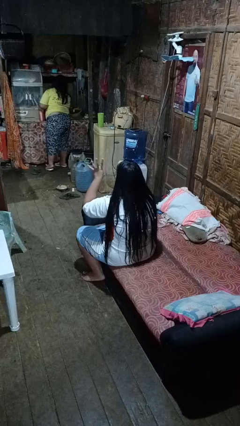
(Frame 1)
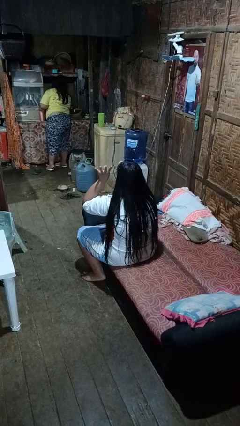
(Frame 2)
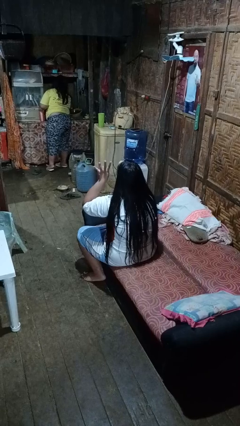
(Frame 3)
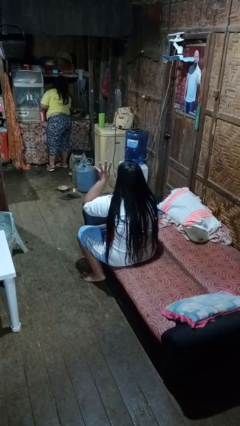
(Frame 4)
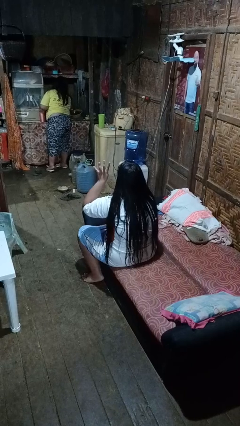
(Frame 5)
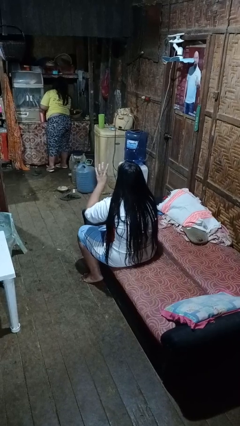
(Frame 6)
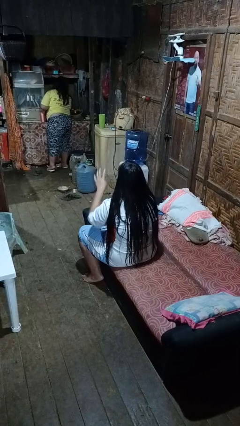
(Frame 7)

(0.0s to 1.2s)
person gestures number four

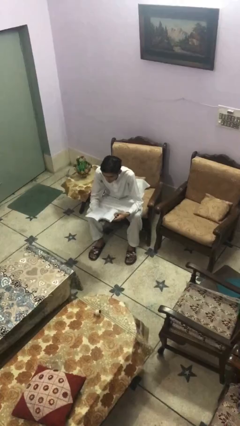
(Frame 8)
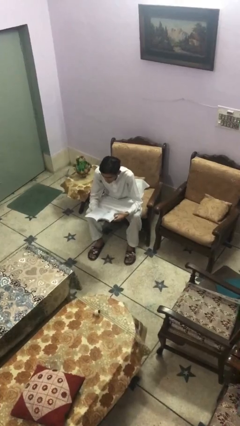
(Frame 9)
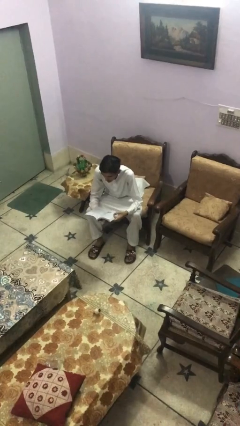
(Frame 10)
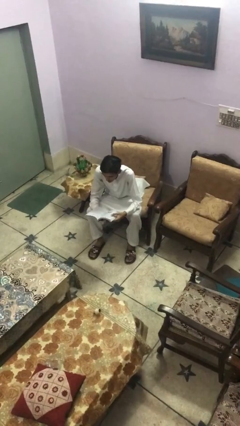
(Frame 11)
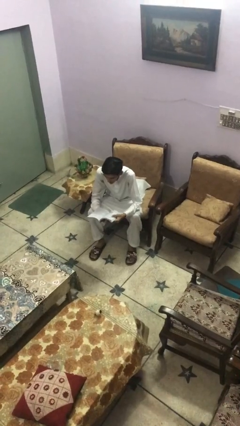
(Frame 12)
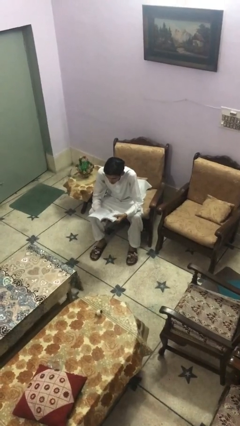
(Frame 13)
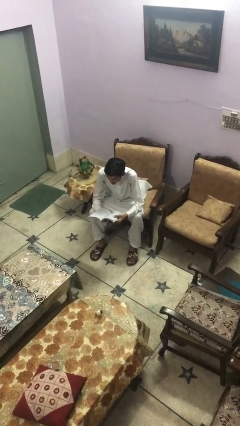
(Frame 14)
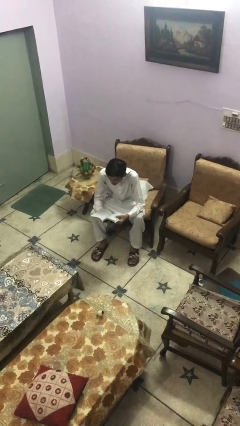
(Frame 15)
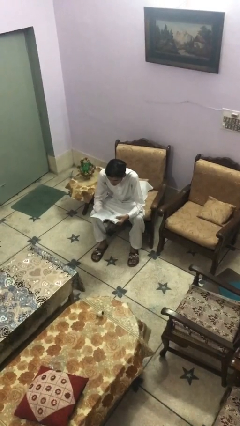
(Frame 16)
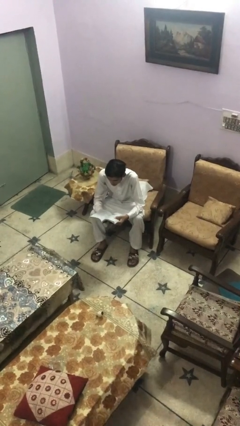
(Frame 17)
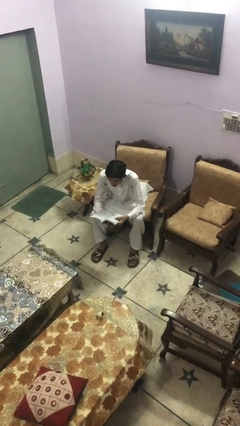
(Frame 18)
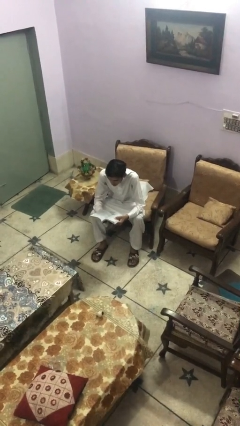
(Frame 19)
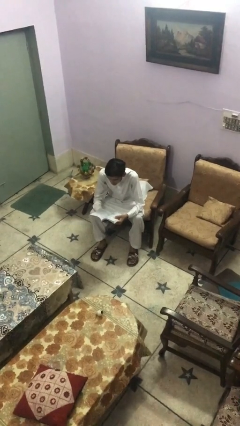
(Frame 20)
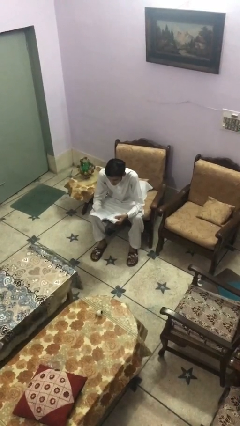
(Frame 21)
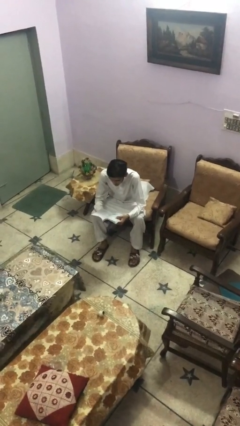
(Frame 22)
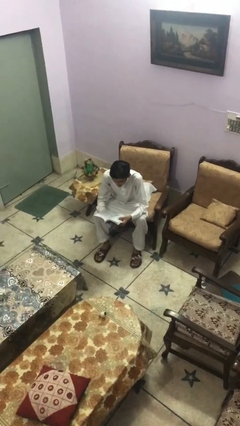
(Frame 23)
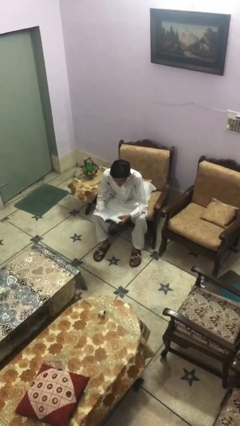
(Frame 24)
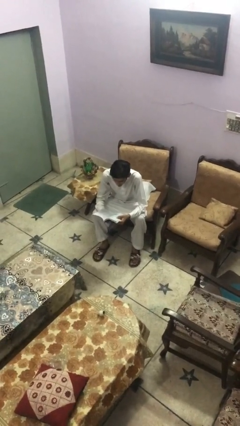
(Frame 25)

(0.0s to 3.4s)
person reads document

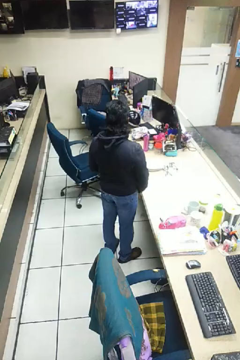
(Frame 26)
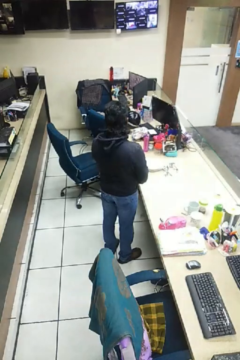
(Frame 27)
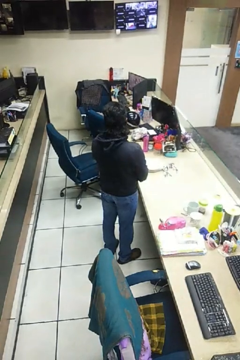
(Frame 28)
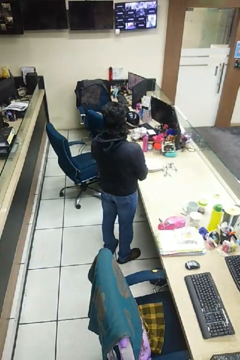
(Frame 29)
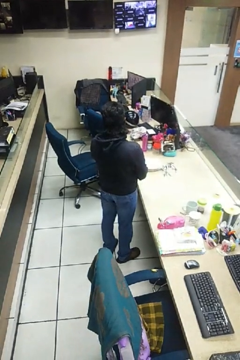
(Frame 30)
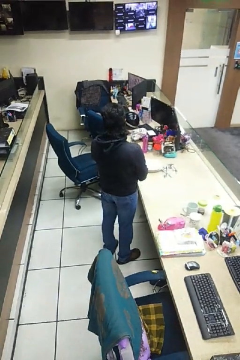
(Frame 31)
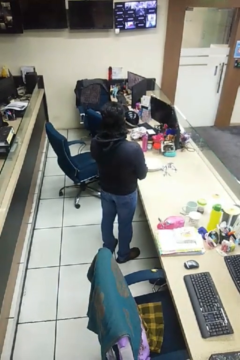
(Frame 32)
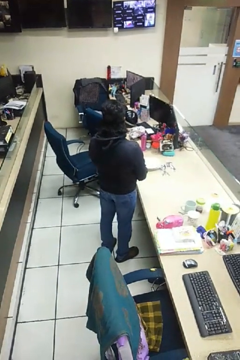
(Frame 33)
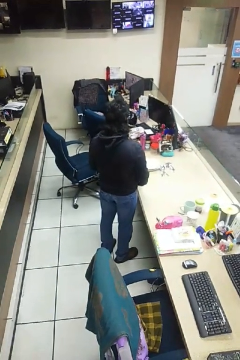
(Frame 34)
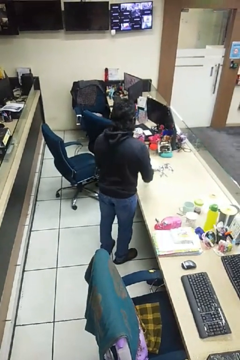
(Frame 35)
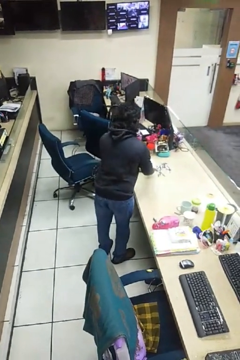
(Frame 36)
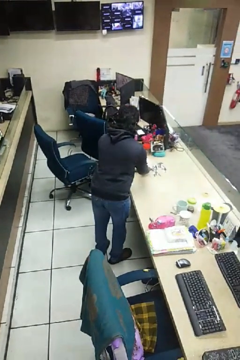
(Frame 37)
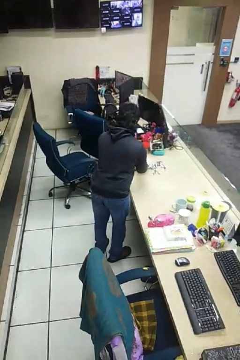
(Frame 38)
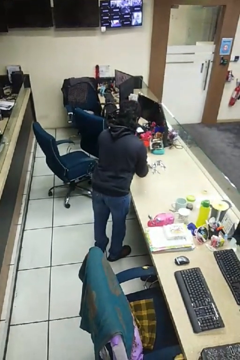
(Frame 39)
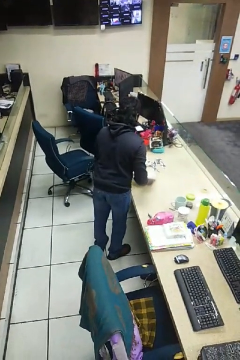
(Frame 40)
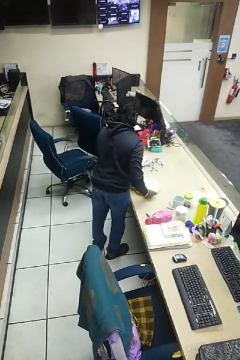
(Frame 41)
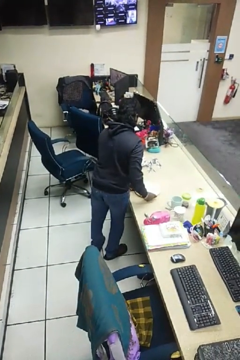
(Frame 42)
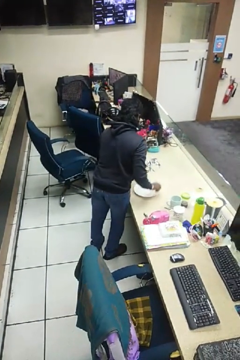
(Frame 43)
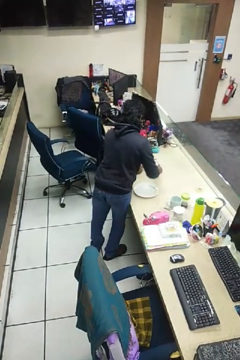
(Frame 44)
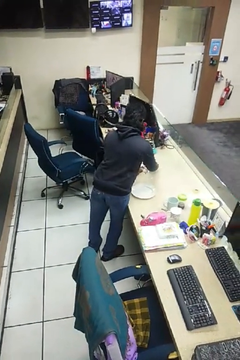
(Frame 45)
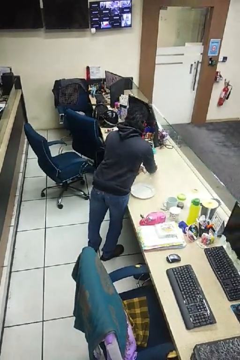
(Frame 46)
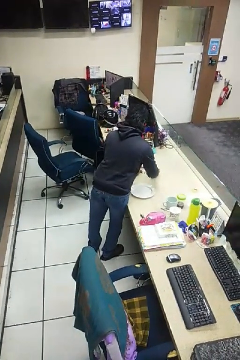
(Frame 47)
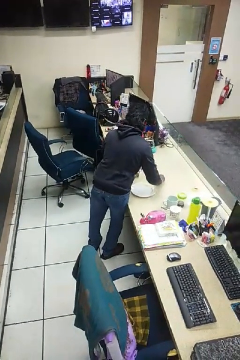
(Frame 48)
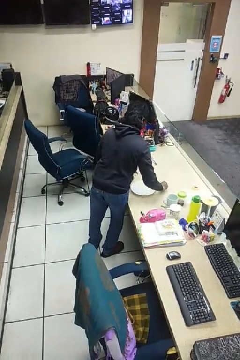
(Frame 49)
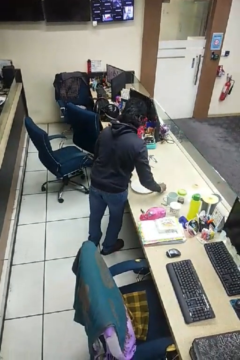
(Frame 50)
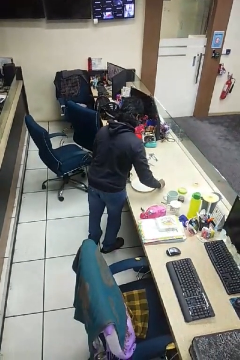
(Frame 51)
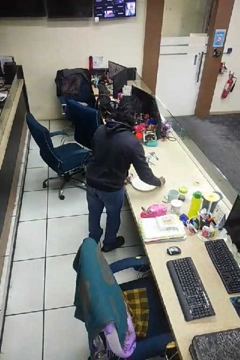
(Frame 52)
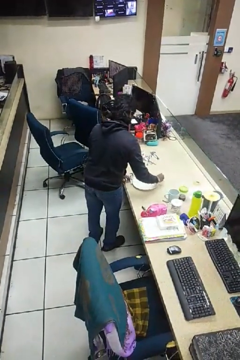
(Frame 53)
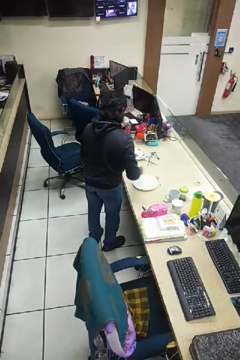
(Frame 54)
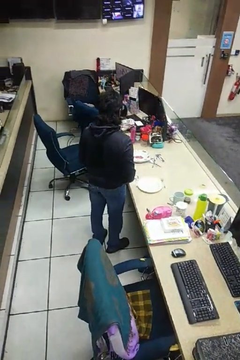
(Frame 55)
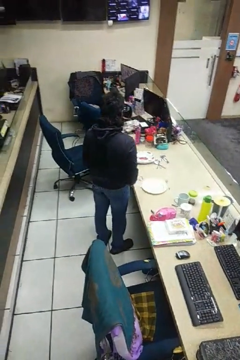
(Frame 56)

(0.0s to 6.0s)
person sets table

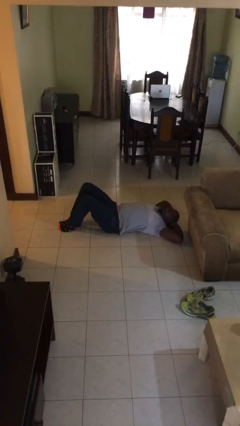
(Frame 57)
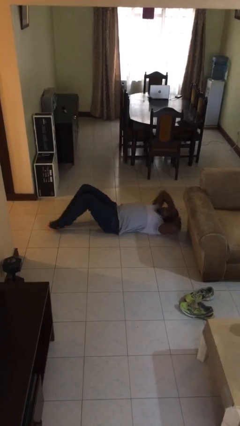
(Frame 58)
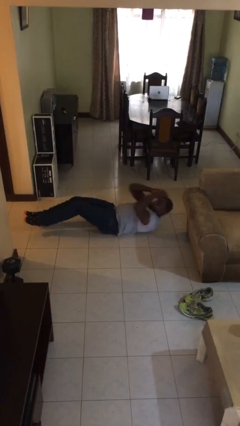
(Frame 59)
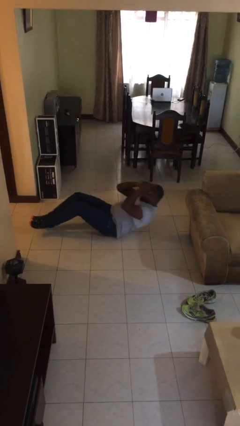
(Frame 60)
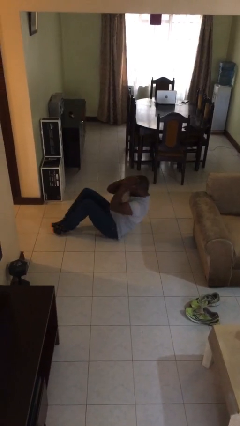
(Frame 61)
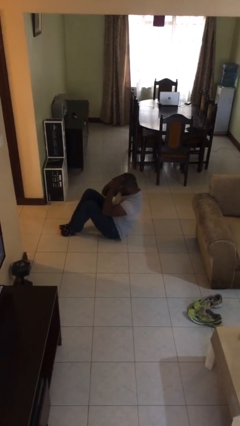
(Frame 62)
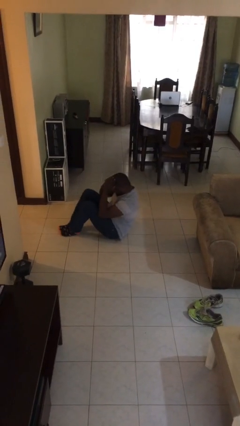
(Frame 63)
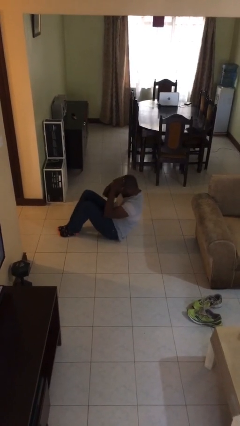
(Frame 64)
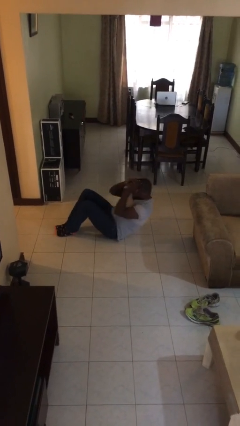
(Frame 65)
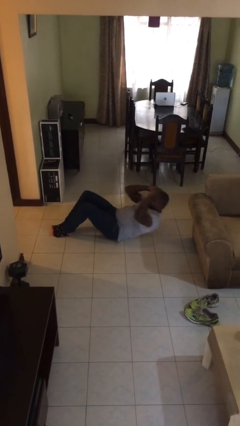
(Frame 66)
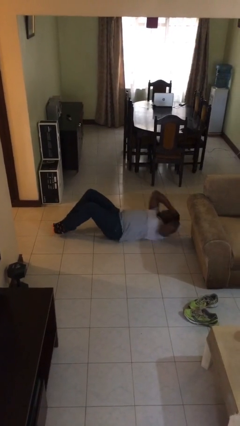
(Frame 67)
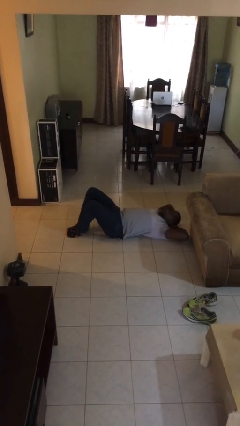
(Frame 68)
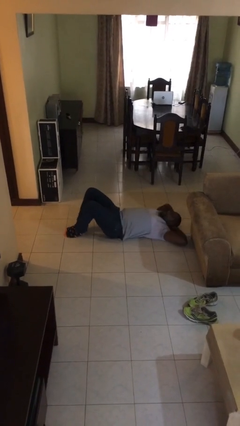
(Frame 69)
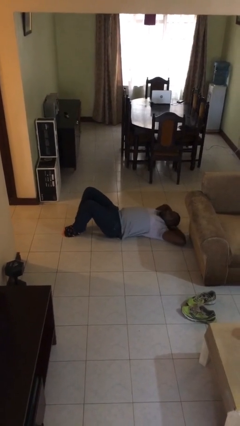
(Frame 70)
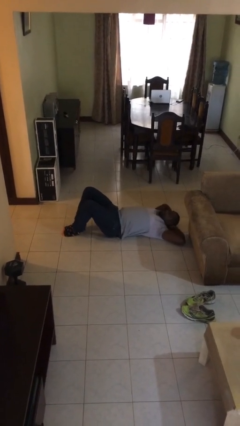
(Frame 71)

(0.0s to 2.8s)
person exercises with situp

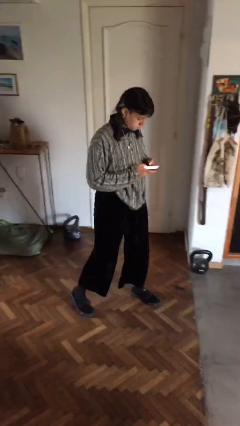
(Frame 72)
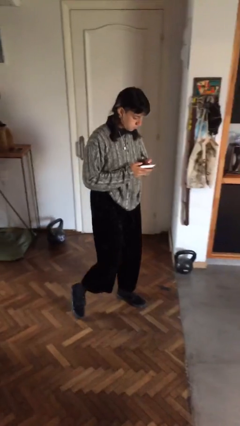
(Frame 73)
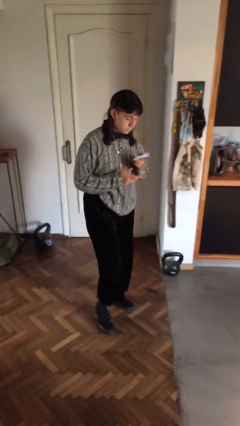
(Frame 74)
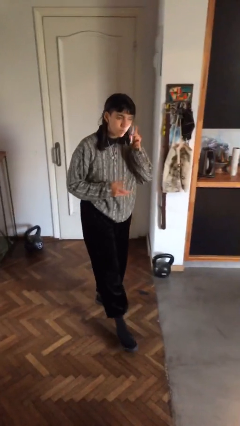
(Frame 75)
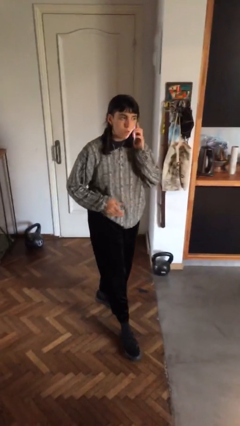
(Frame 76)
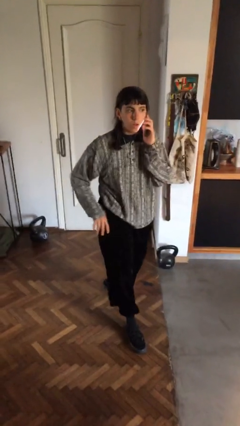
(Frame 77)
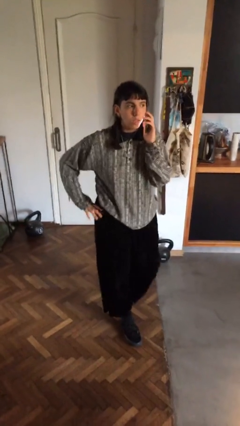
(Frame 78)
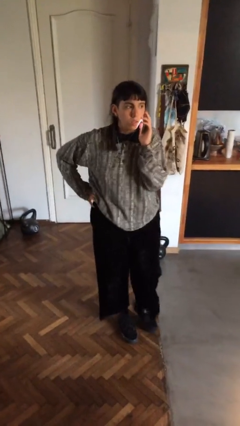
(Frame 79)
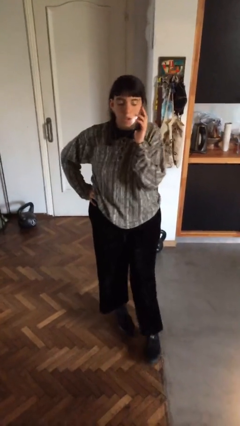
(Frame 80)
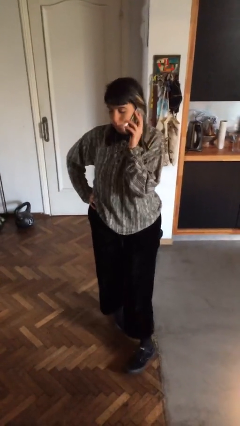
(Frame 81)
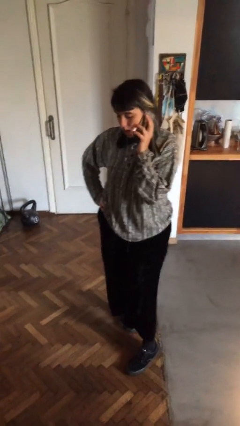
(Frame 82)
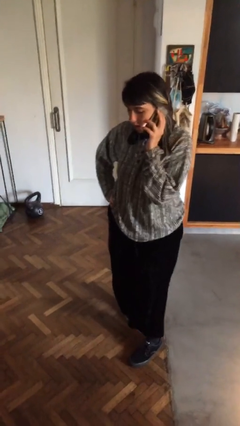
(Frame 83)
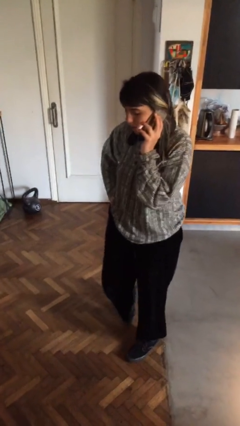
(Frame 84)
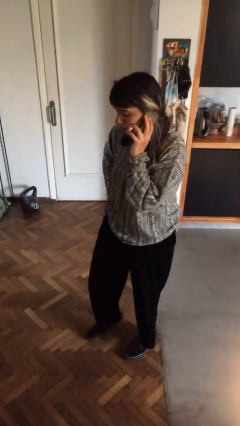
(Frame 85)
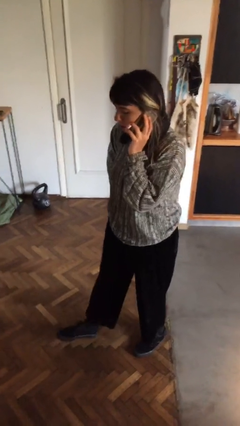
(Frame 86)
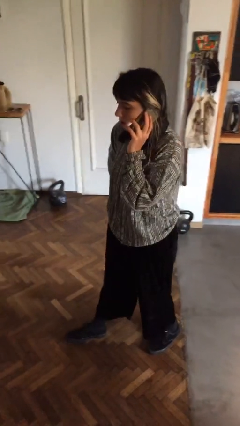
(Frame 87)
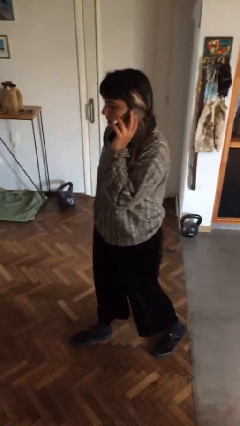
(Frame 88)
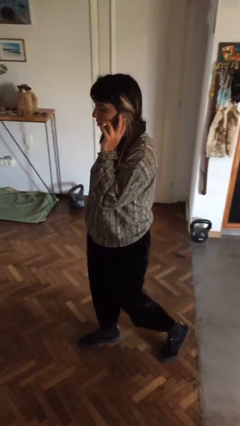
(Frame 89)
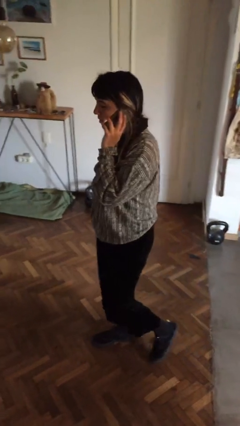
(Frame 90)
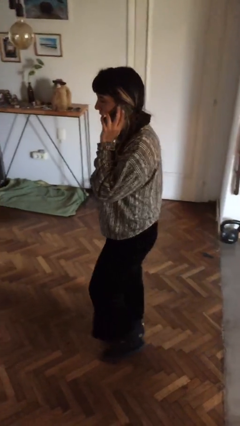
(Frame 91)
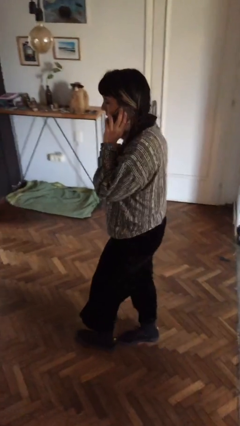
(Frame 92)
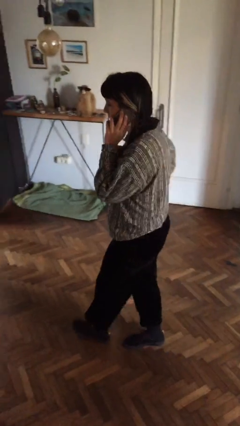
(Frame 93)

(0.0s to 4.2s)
person talks on phone

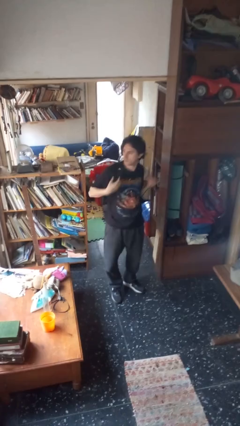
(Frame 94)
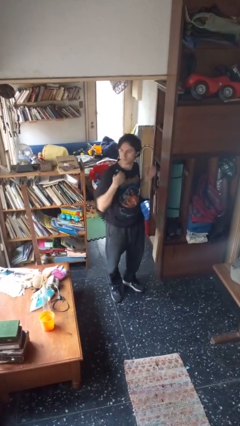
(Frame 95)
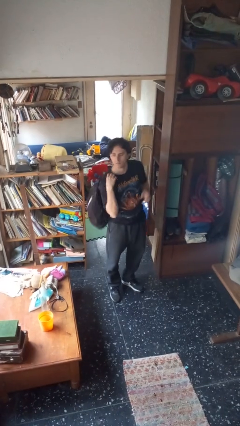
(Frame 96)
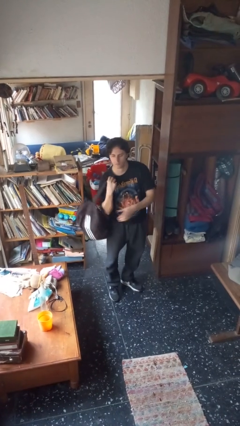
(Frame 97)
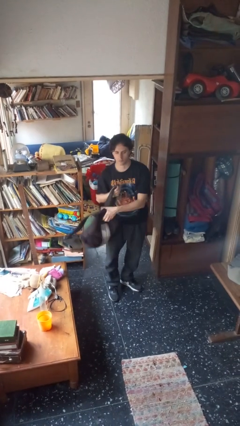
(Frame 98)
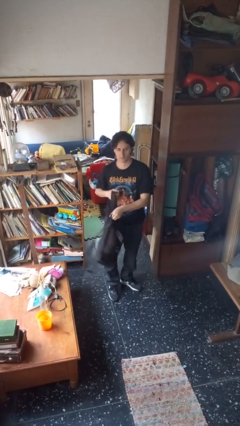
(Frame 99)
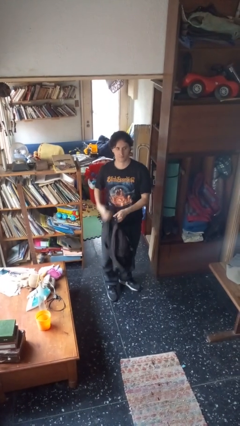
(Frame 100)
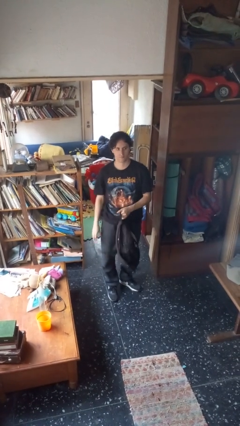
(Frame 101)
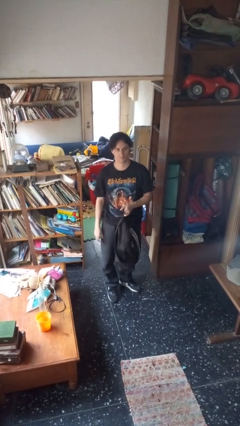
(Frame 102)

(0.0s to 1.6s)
person takes off backpack
